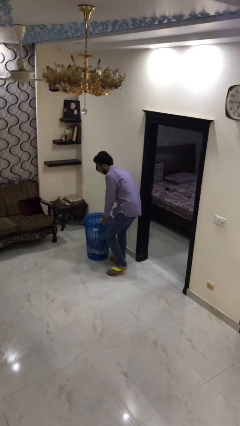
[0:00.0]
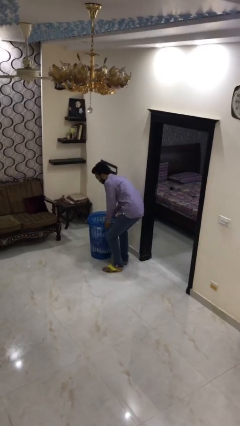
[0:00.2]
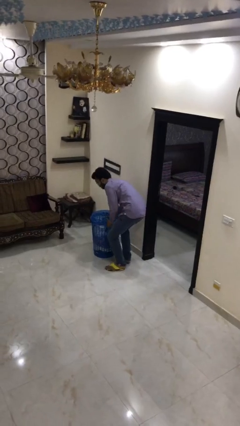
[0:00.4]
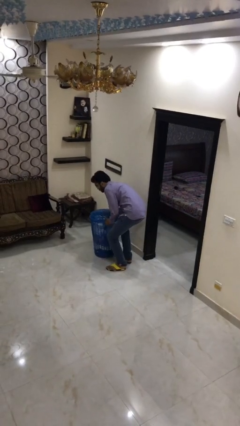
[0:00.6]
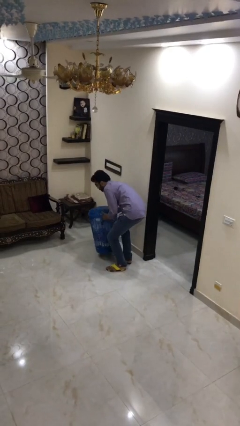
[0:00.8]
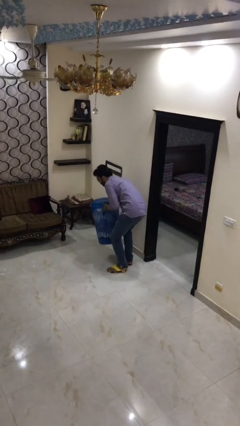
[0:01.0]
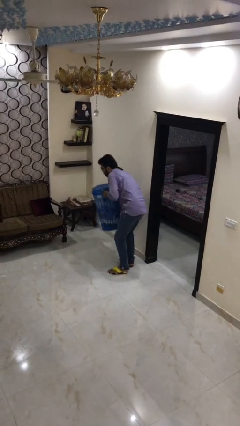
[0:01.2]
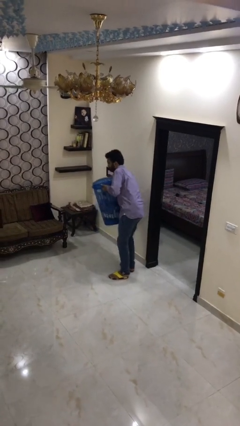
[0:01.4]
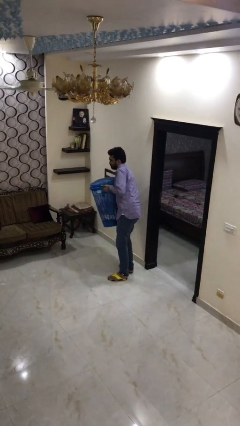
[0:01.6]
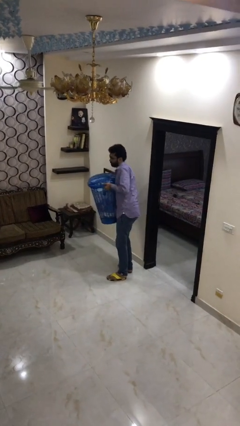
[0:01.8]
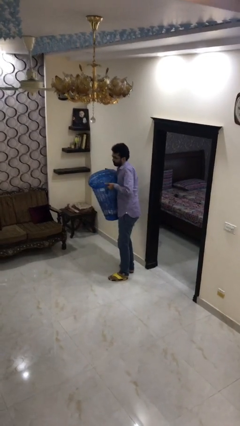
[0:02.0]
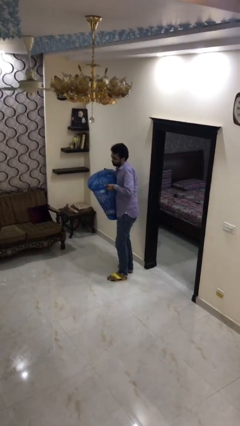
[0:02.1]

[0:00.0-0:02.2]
person picks up object from floor

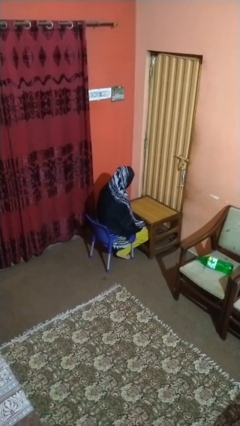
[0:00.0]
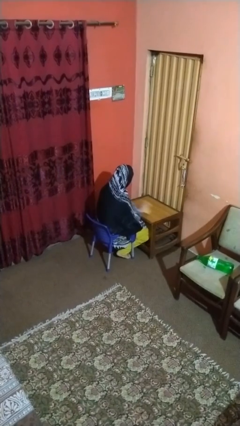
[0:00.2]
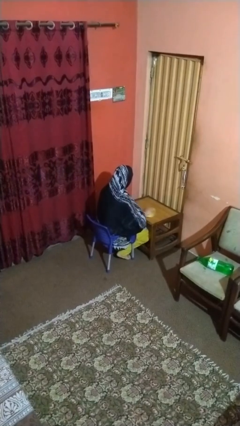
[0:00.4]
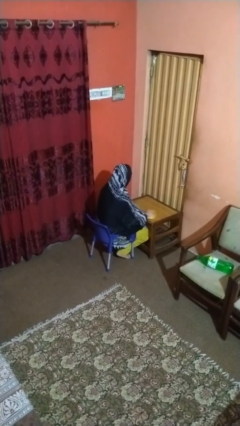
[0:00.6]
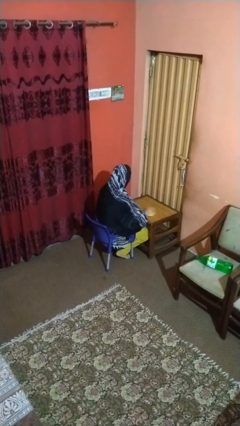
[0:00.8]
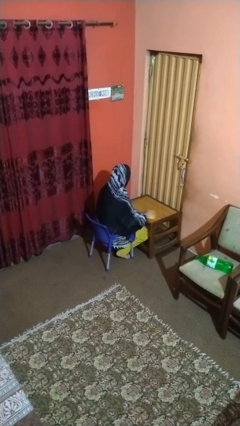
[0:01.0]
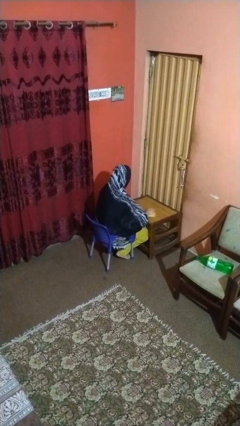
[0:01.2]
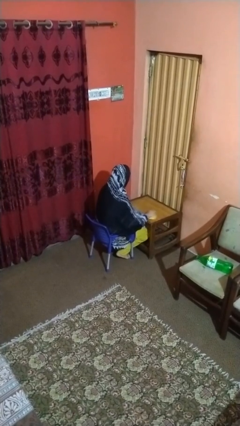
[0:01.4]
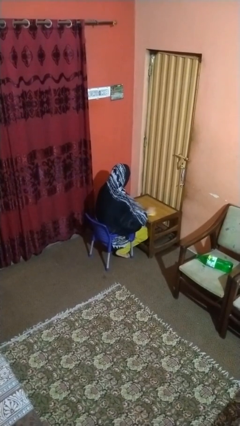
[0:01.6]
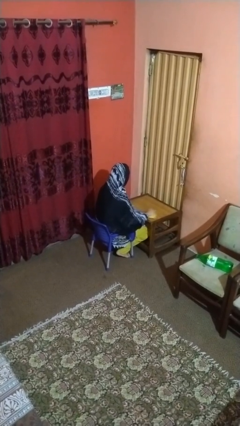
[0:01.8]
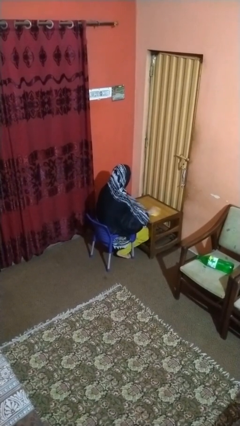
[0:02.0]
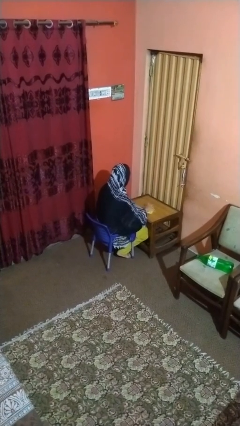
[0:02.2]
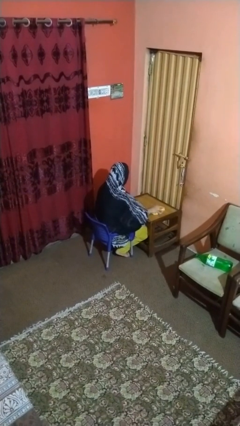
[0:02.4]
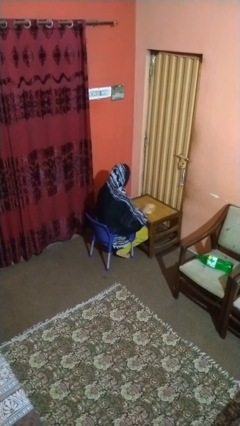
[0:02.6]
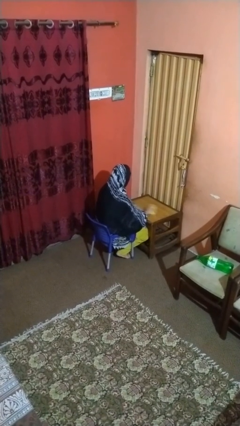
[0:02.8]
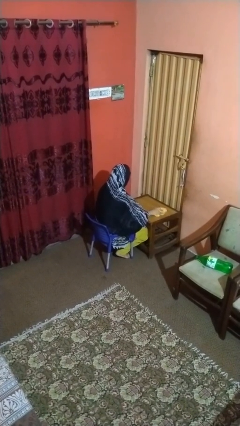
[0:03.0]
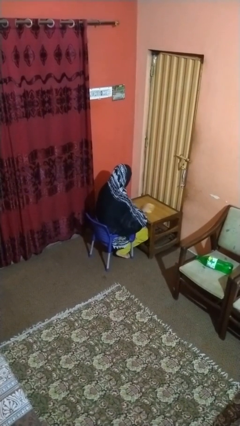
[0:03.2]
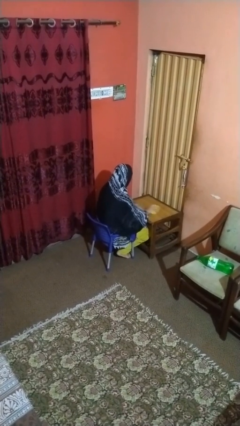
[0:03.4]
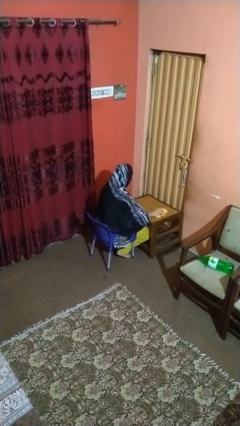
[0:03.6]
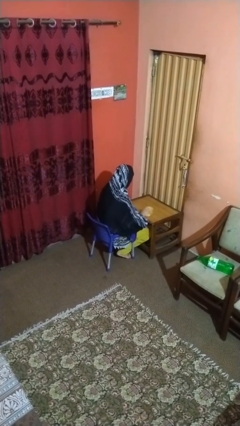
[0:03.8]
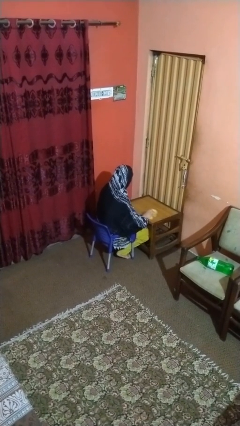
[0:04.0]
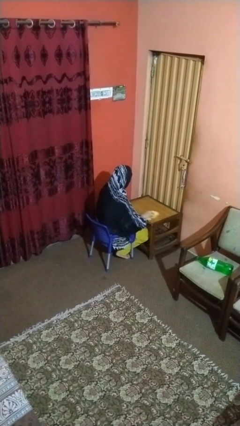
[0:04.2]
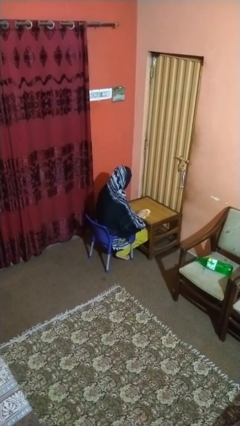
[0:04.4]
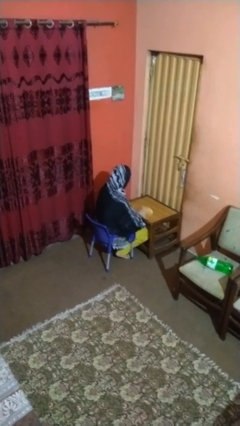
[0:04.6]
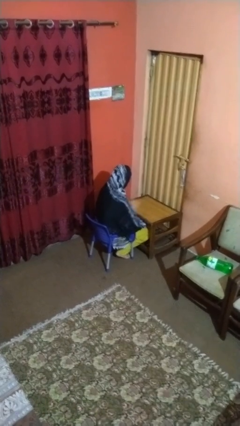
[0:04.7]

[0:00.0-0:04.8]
person cleans table with rag

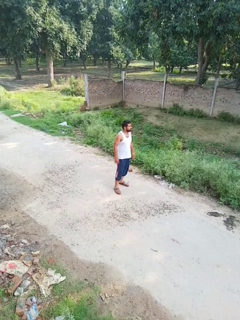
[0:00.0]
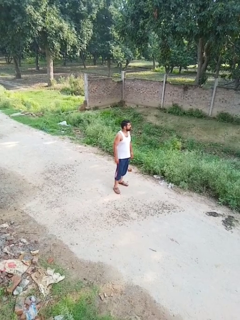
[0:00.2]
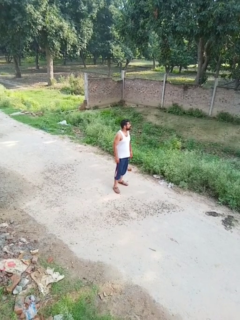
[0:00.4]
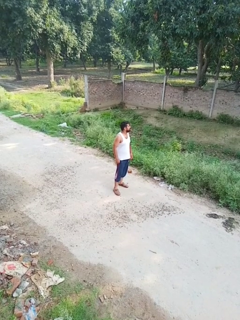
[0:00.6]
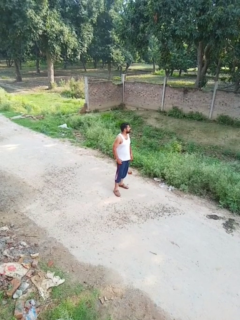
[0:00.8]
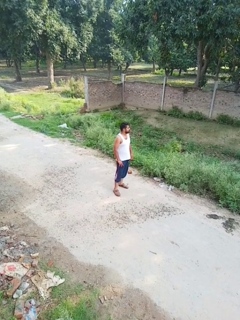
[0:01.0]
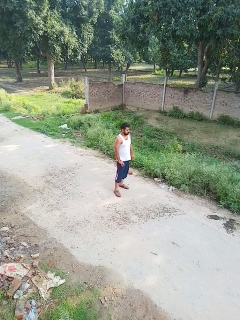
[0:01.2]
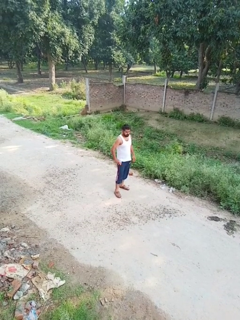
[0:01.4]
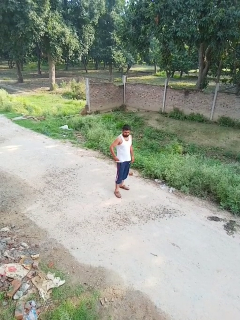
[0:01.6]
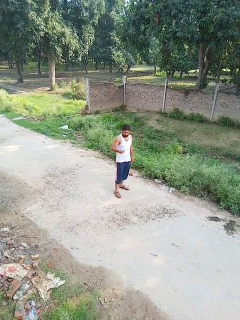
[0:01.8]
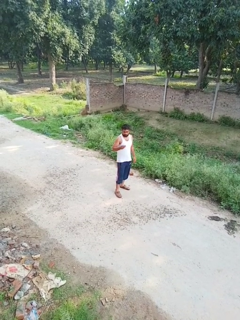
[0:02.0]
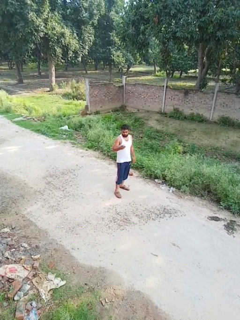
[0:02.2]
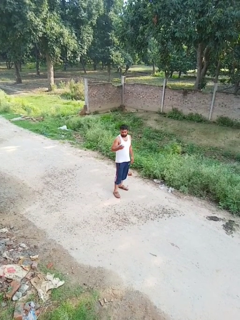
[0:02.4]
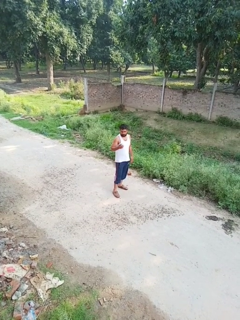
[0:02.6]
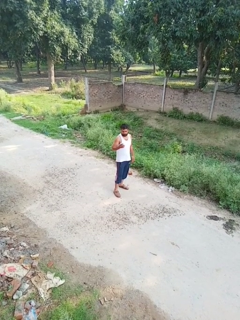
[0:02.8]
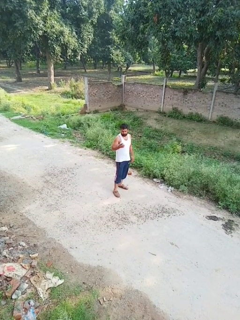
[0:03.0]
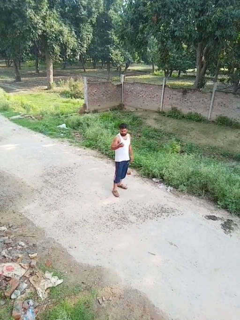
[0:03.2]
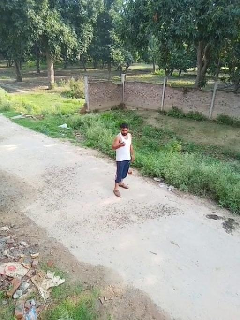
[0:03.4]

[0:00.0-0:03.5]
person takes phone from pocket

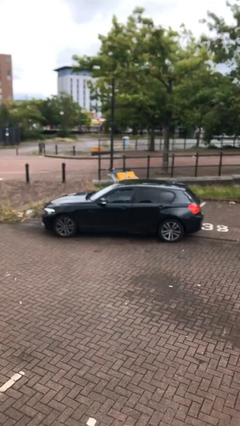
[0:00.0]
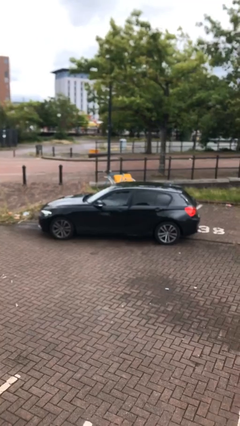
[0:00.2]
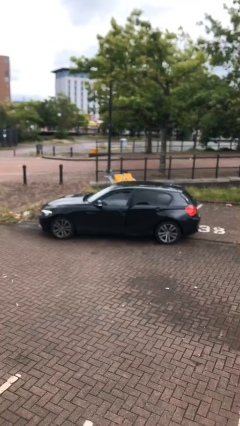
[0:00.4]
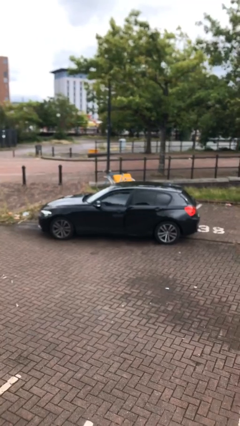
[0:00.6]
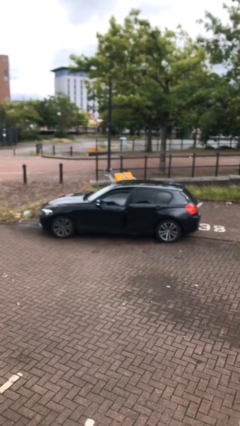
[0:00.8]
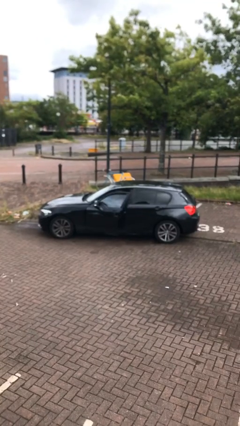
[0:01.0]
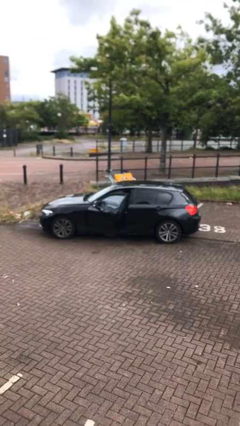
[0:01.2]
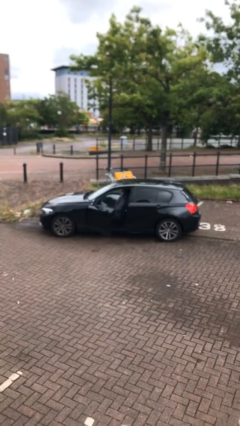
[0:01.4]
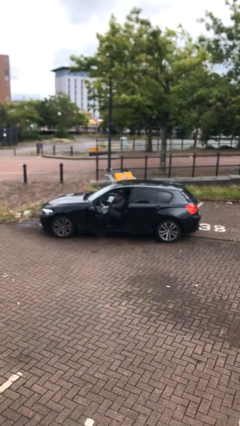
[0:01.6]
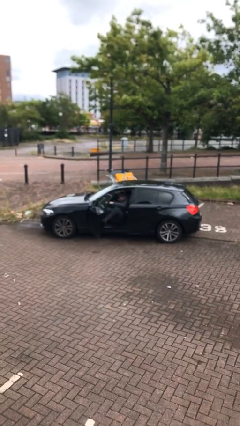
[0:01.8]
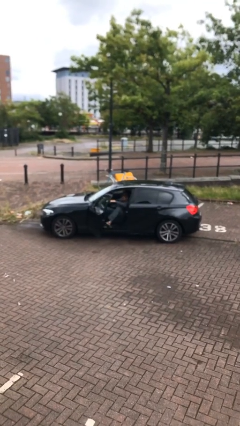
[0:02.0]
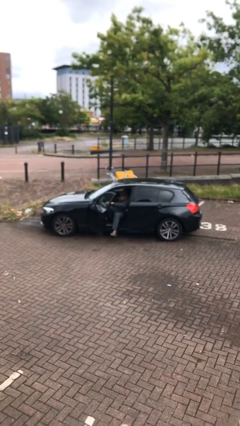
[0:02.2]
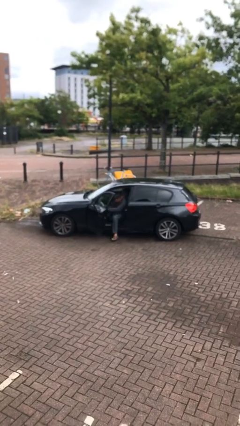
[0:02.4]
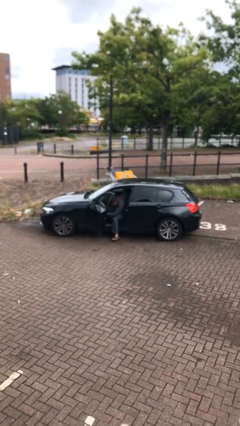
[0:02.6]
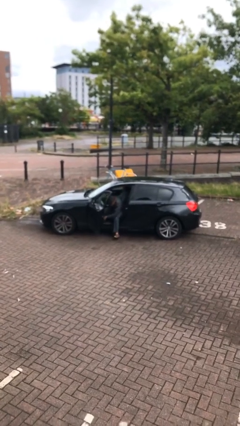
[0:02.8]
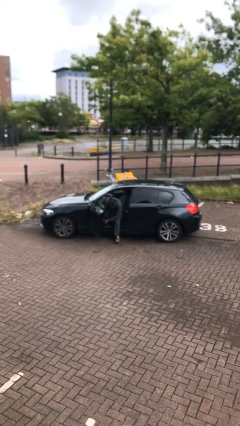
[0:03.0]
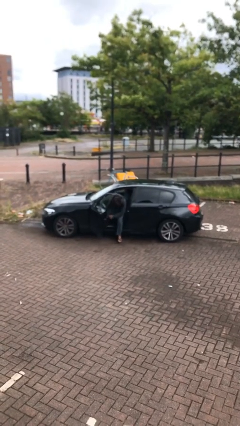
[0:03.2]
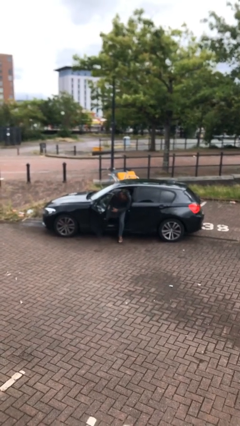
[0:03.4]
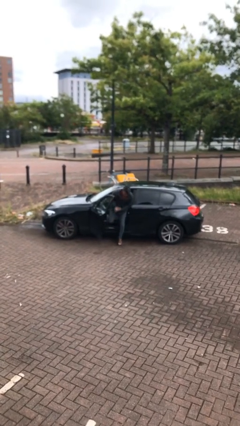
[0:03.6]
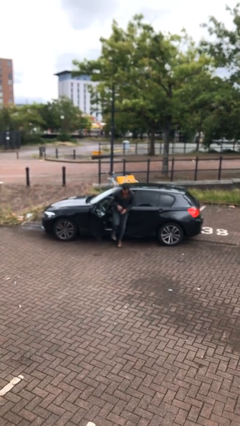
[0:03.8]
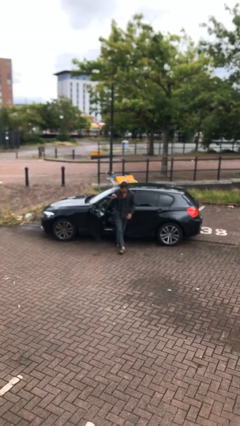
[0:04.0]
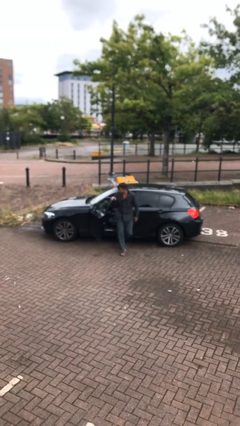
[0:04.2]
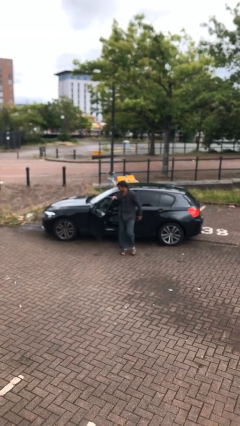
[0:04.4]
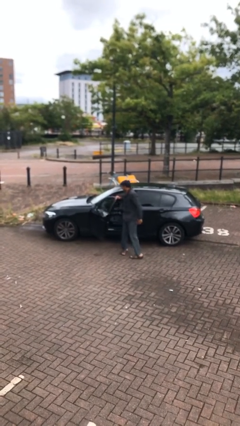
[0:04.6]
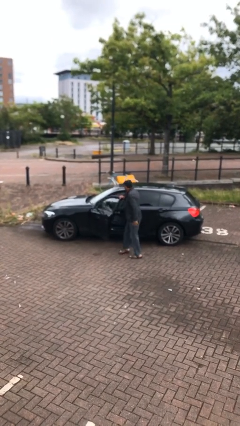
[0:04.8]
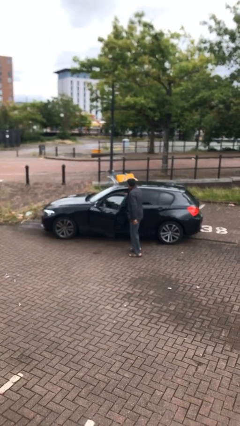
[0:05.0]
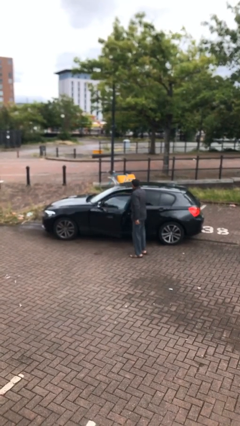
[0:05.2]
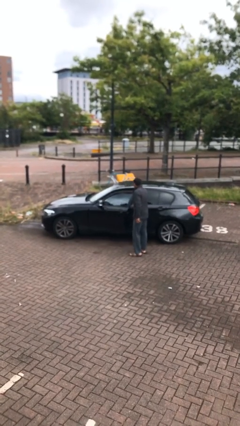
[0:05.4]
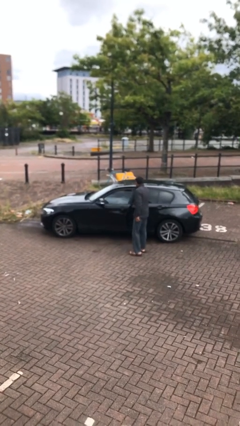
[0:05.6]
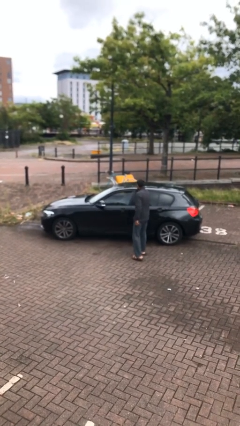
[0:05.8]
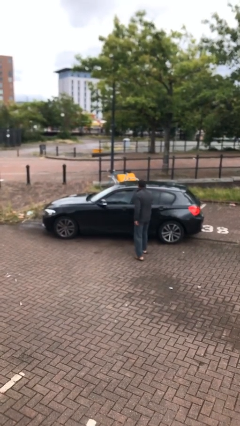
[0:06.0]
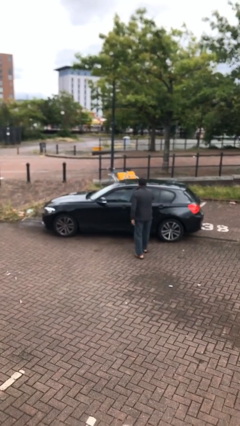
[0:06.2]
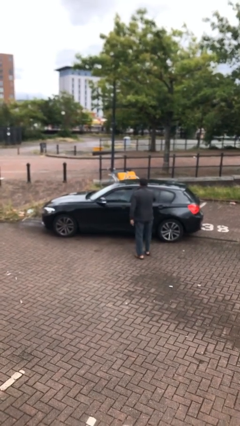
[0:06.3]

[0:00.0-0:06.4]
car drops off person

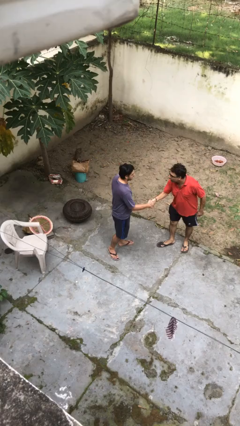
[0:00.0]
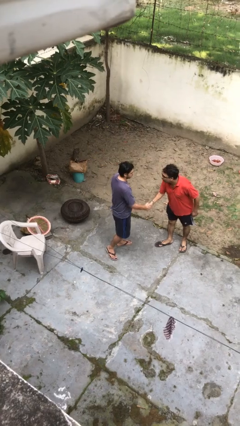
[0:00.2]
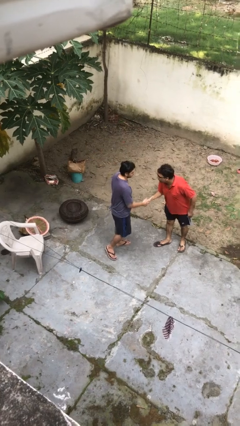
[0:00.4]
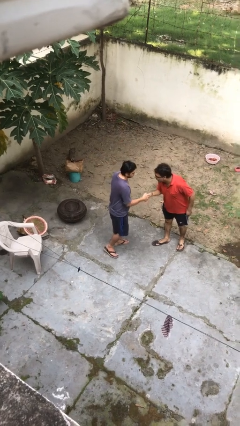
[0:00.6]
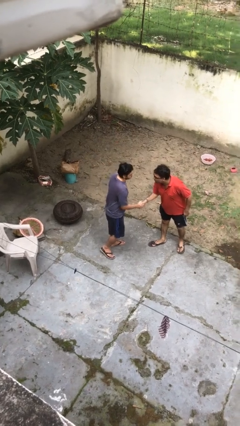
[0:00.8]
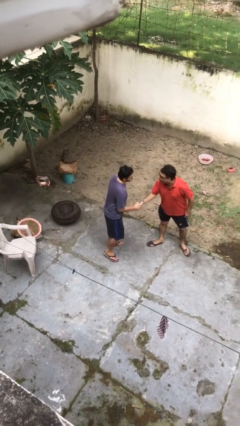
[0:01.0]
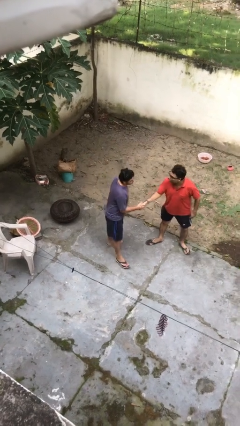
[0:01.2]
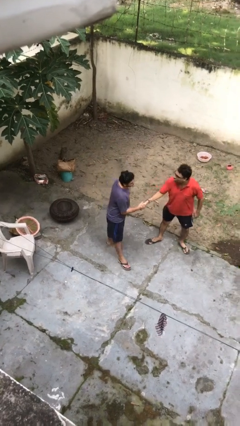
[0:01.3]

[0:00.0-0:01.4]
person shakes hand

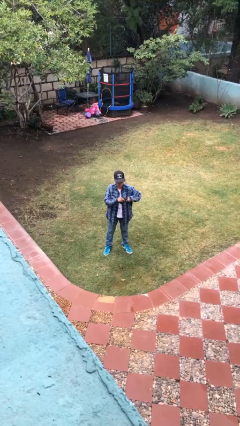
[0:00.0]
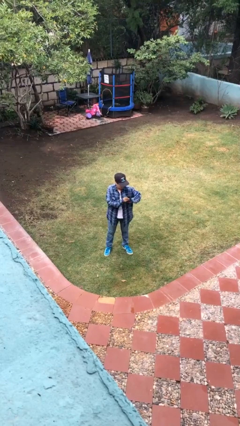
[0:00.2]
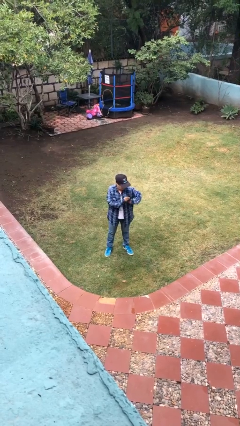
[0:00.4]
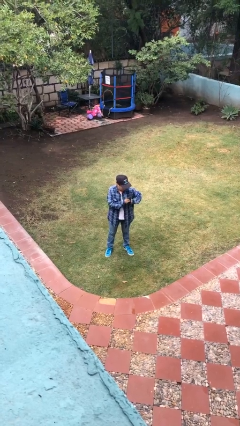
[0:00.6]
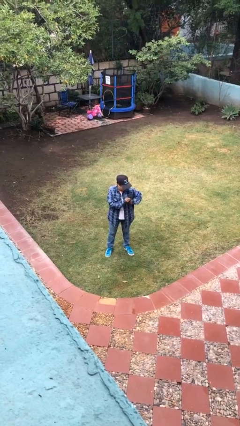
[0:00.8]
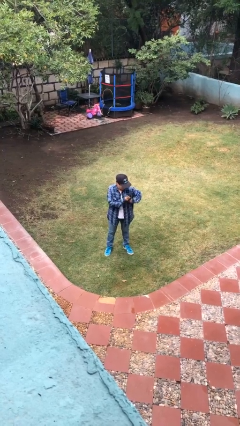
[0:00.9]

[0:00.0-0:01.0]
person puts phone into pocket
